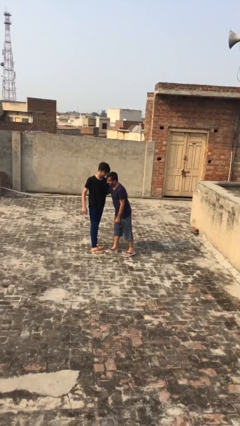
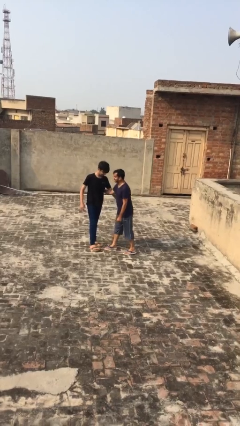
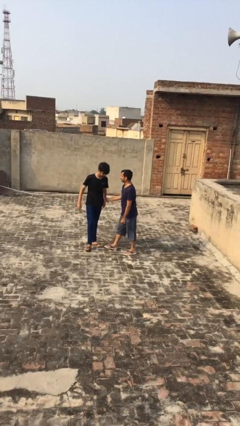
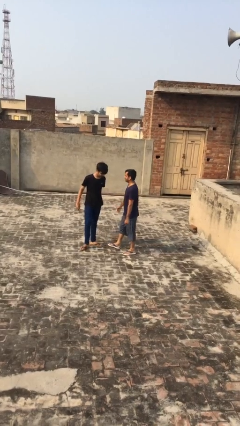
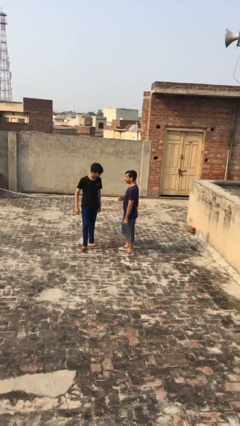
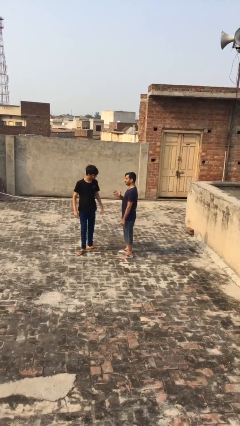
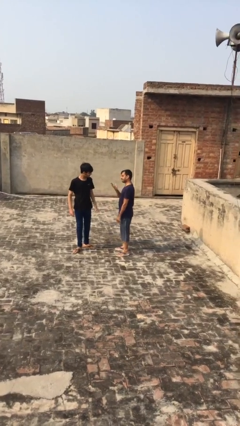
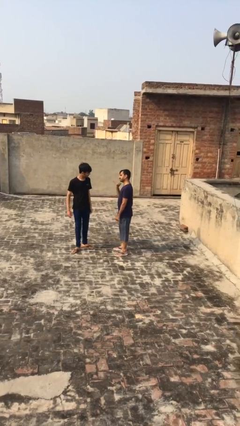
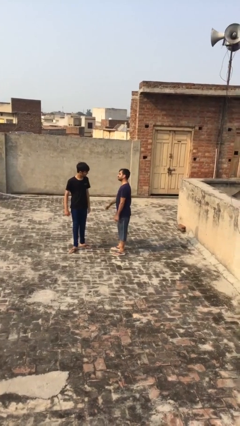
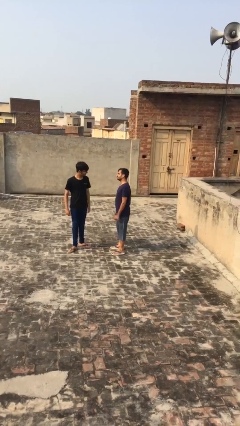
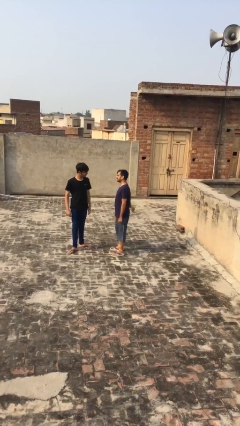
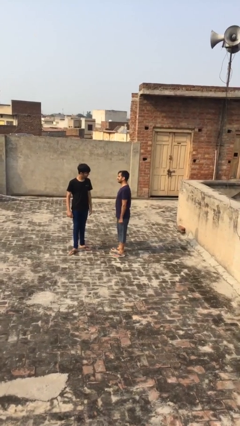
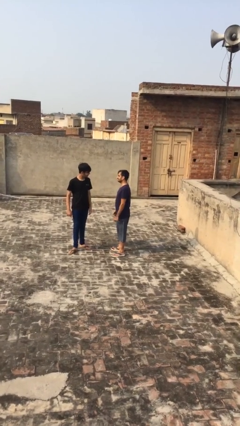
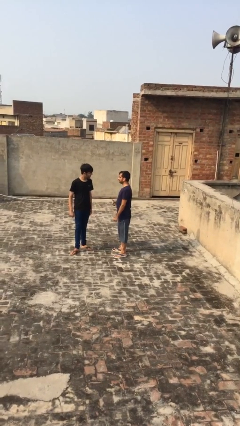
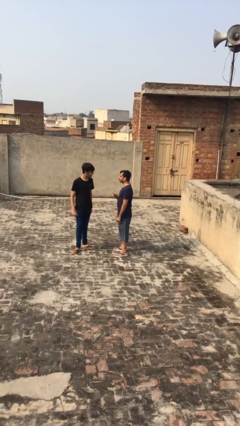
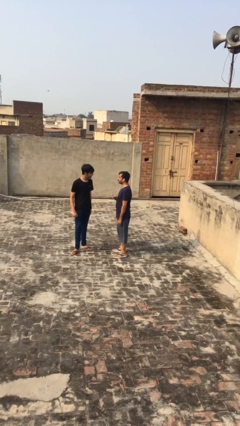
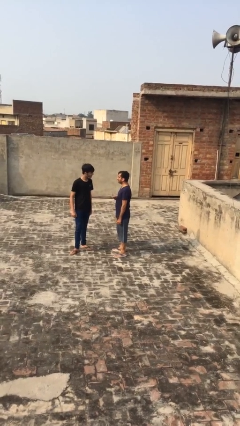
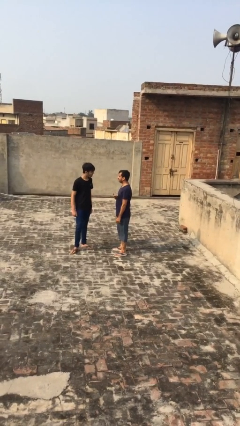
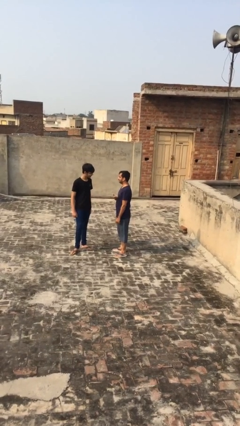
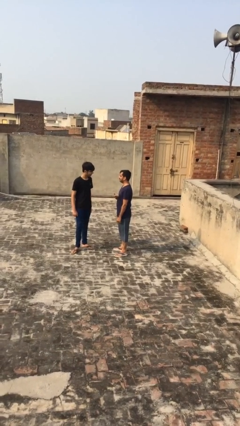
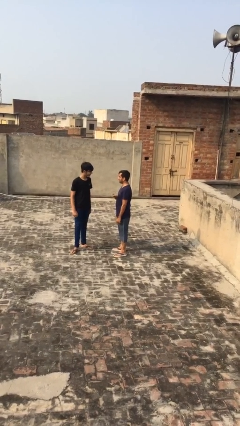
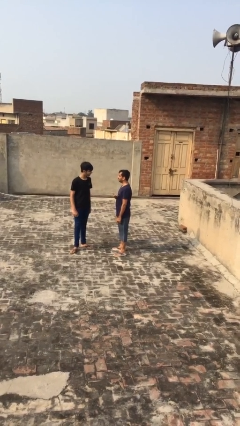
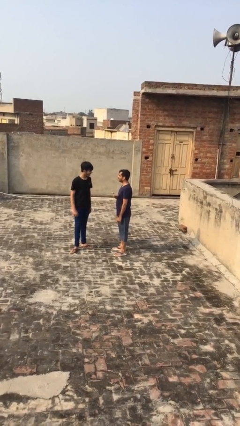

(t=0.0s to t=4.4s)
person talks to person

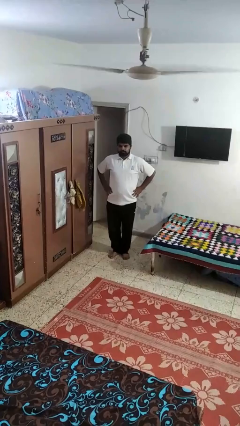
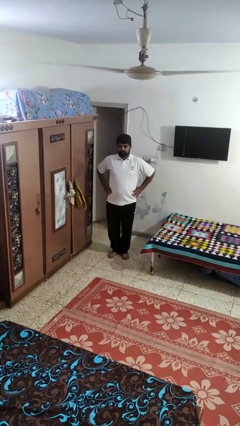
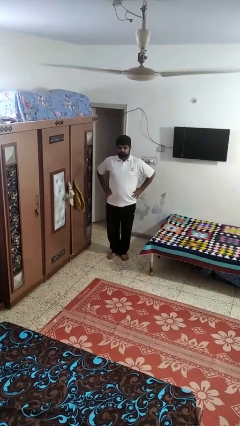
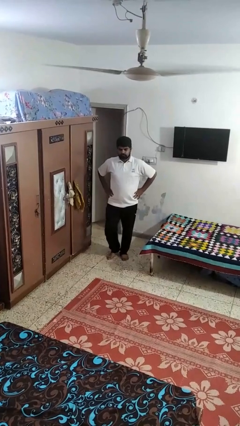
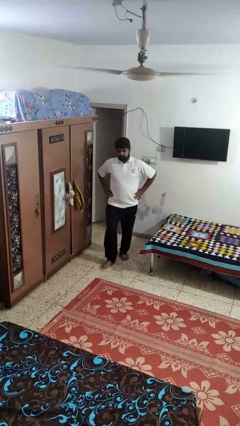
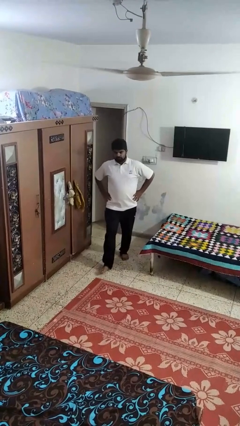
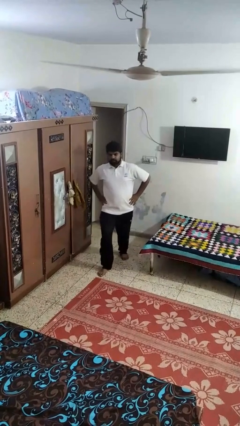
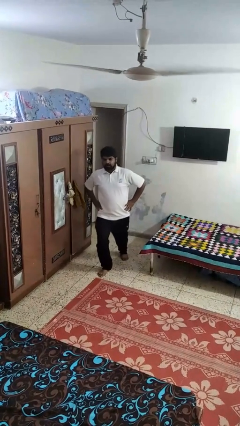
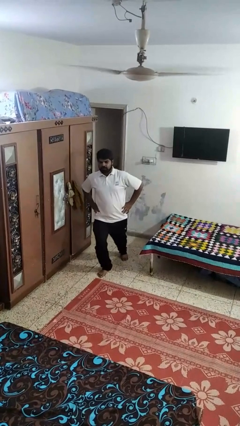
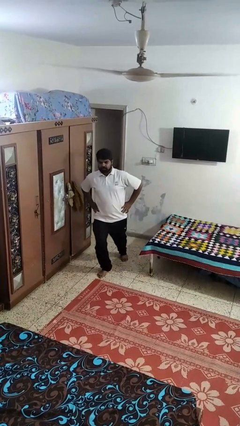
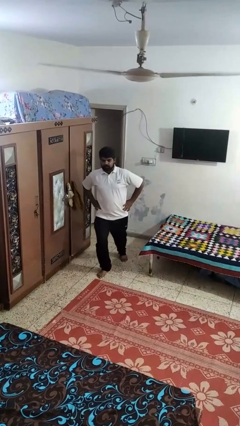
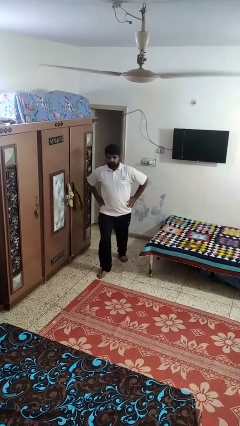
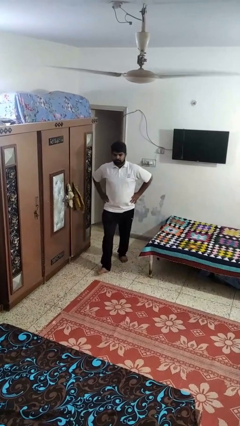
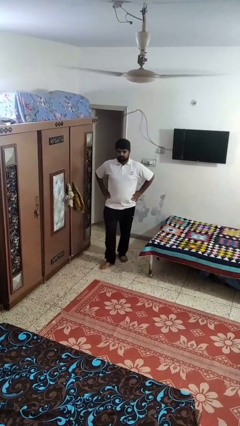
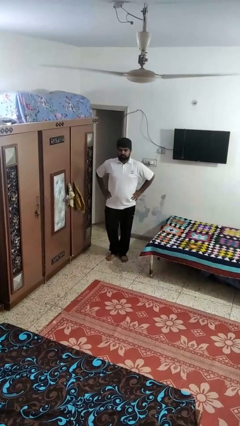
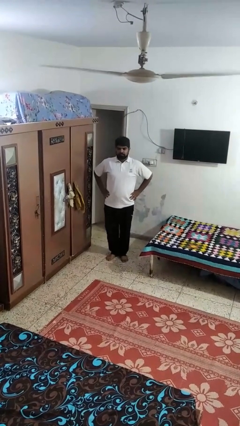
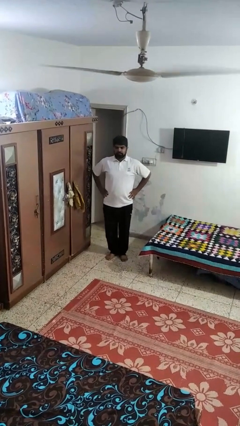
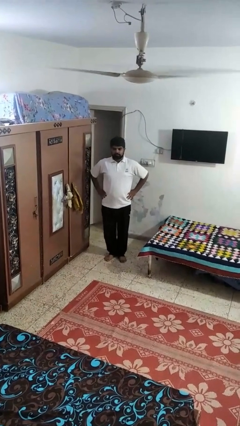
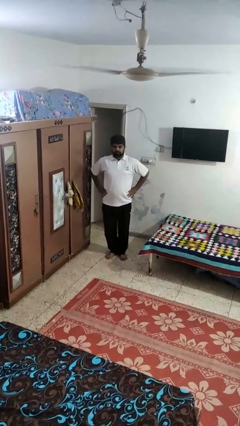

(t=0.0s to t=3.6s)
person exercises with lunges

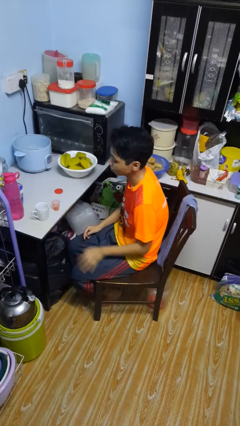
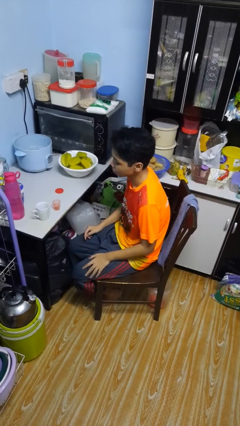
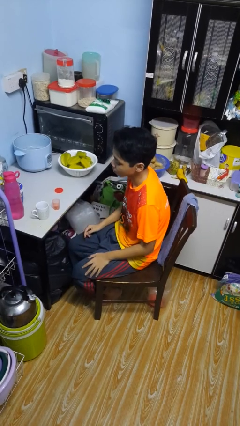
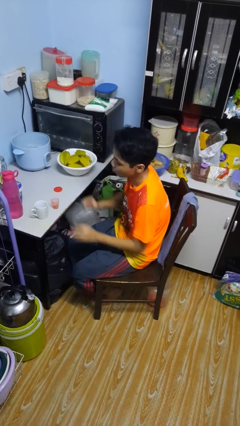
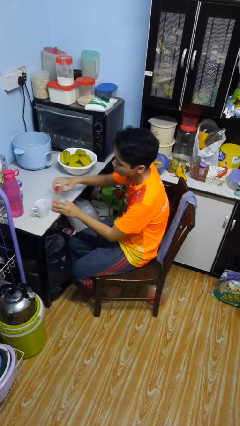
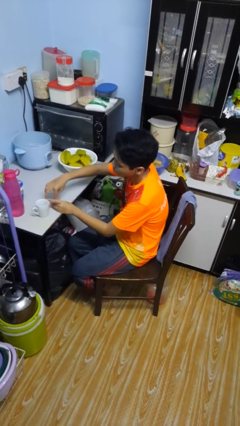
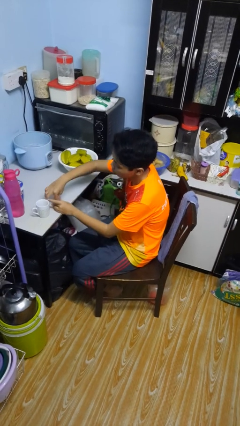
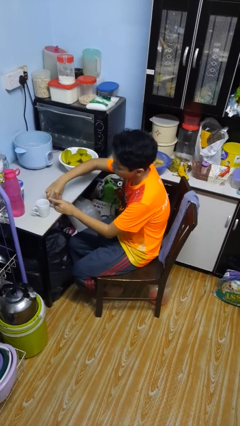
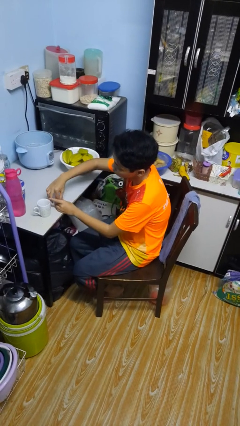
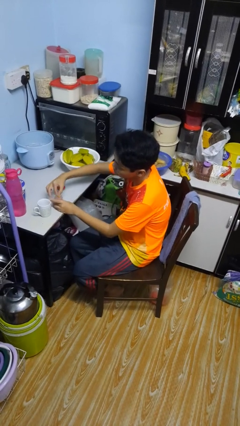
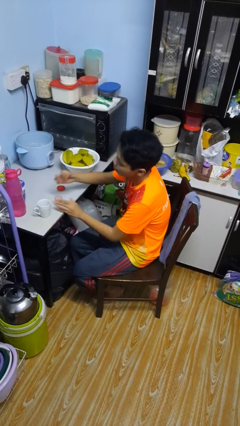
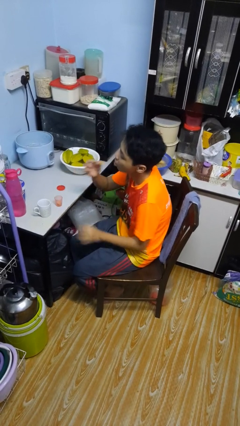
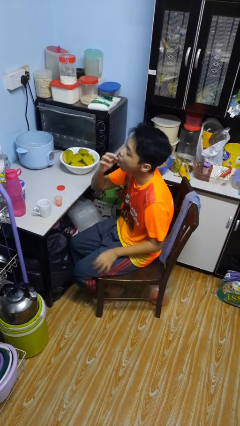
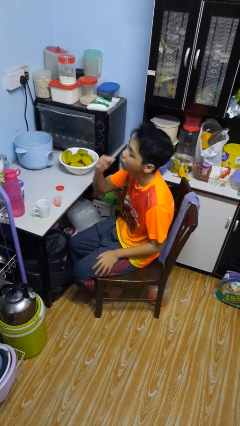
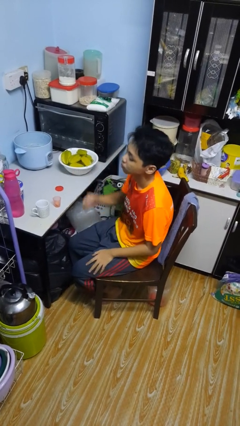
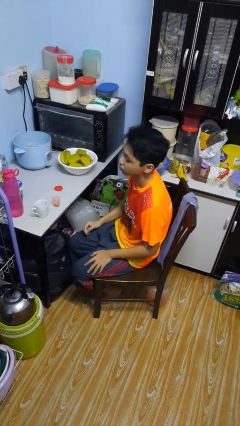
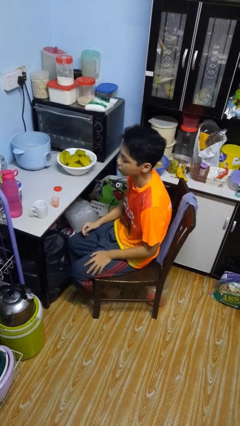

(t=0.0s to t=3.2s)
person takes medicine pills

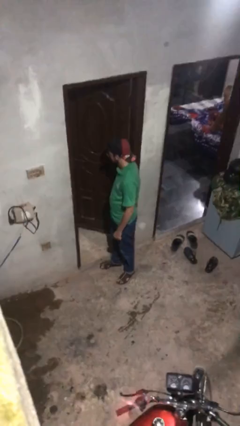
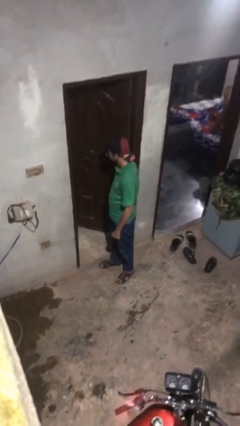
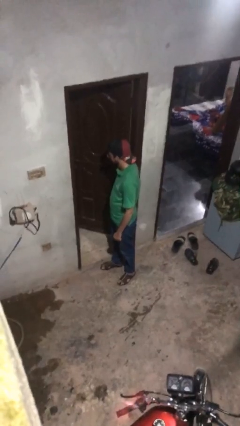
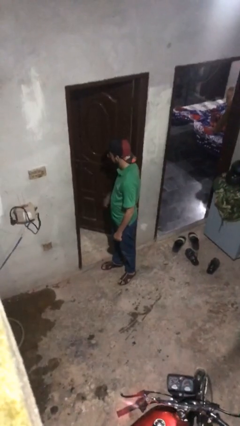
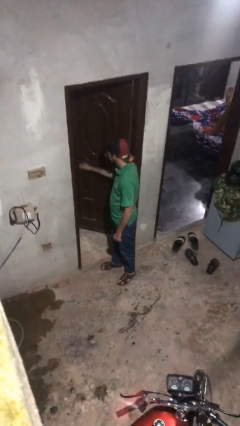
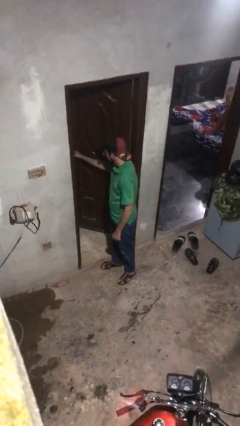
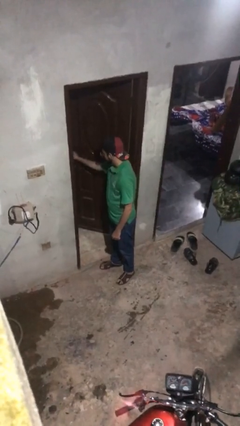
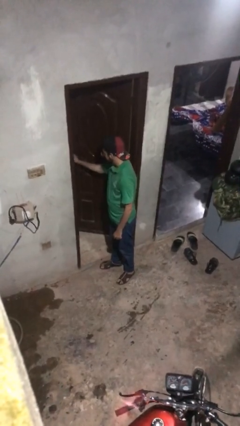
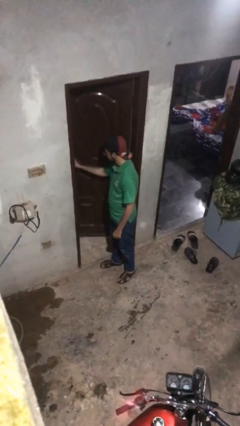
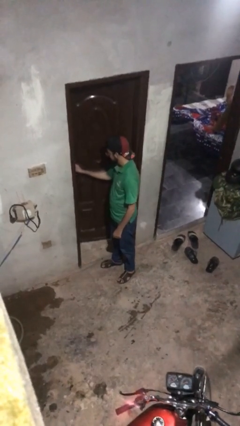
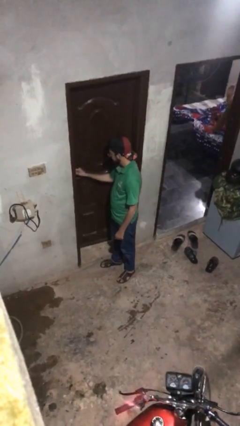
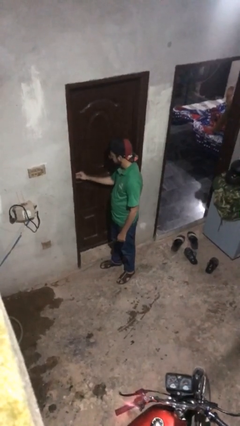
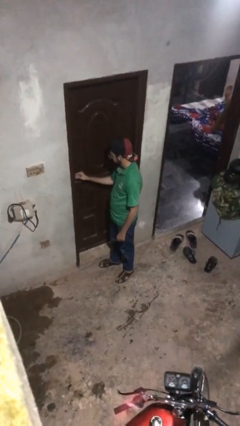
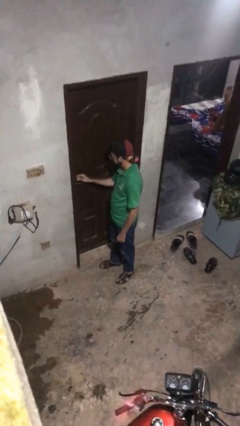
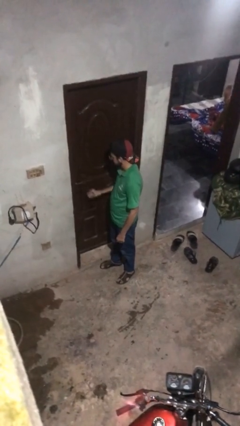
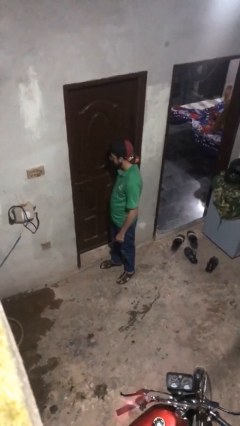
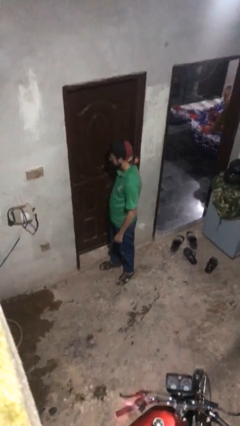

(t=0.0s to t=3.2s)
person closes facility door

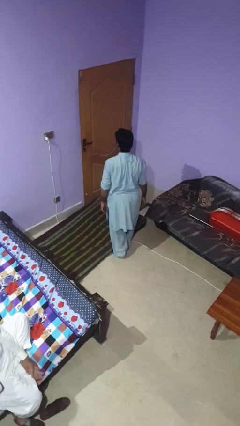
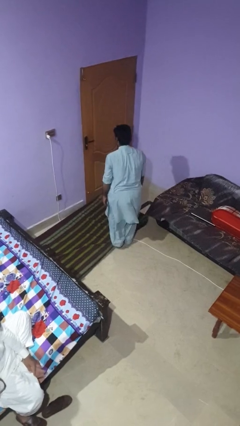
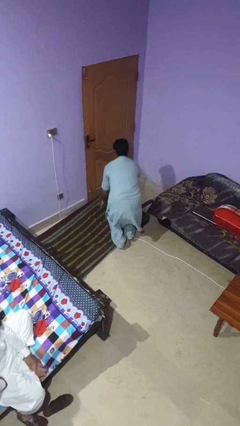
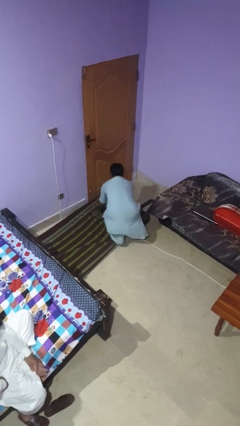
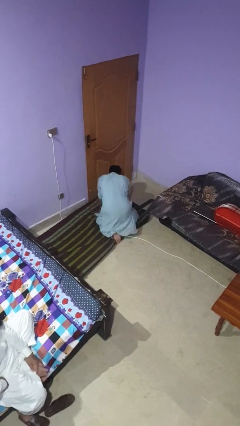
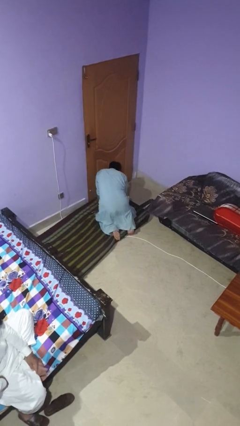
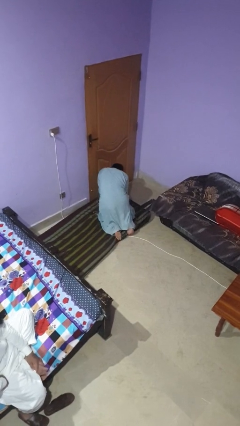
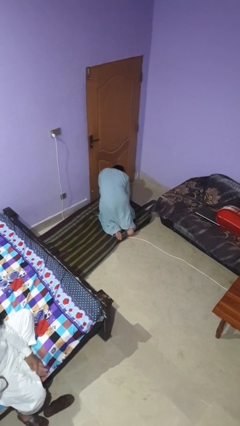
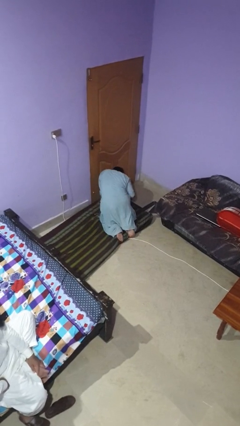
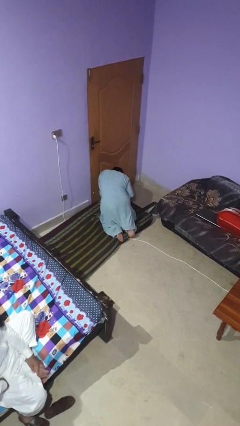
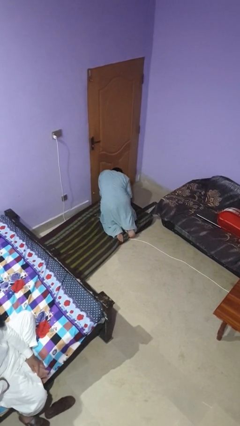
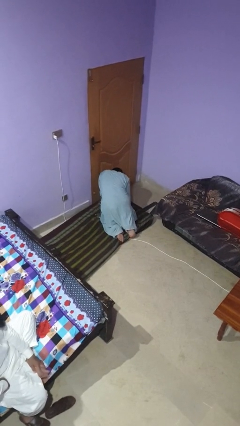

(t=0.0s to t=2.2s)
person trips on object on floor

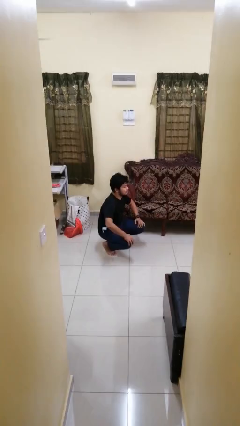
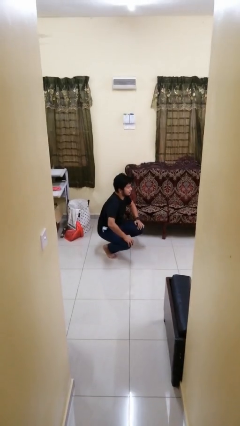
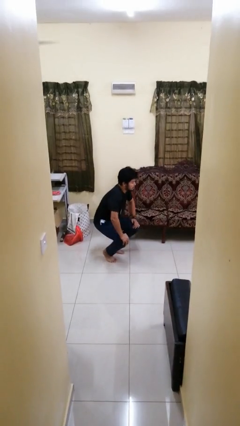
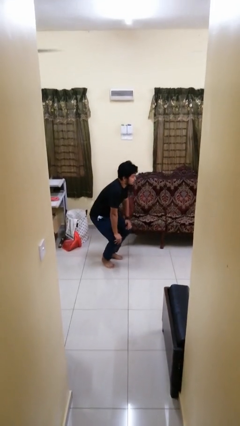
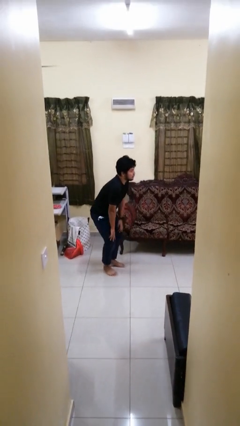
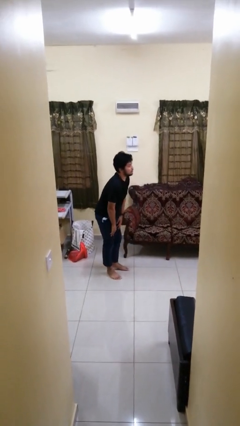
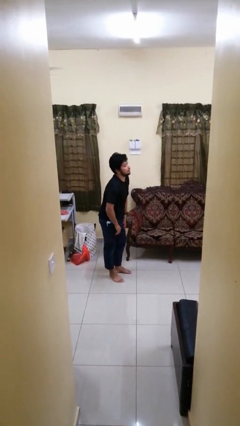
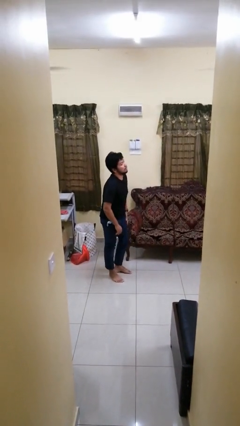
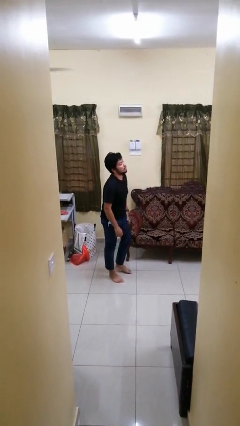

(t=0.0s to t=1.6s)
person stands up
